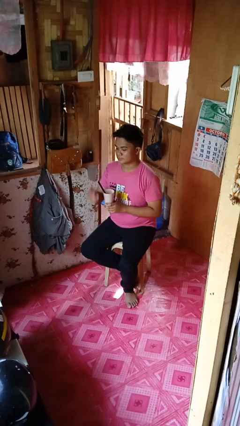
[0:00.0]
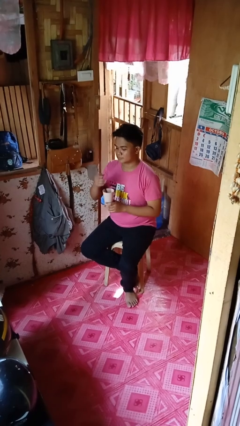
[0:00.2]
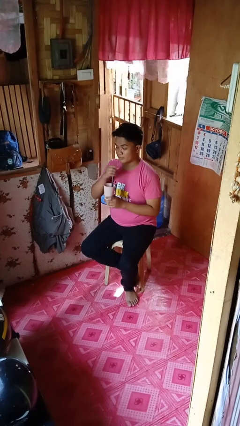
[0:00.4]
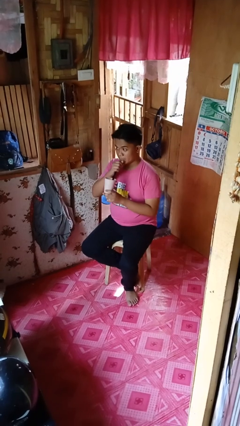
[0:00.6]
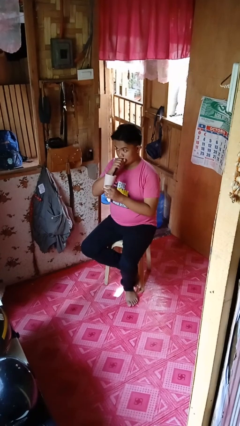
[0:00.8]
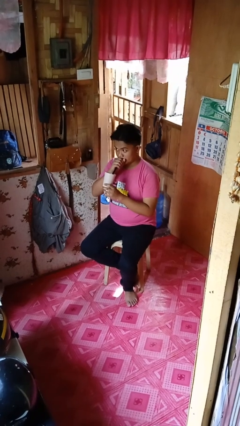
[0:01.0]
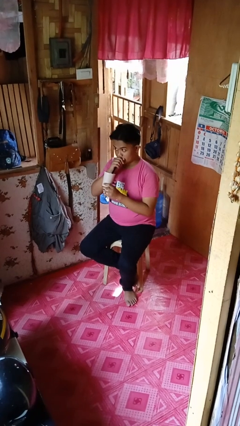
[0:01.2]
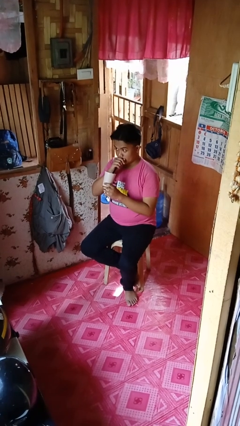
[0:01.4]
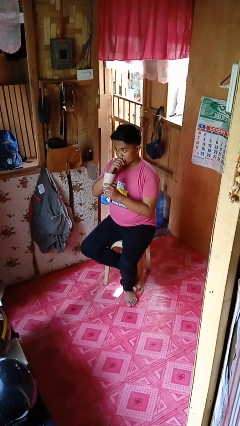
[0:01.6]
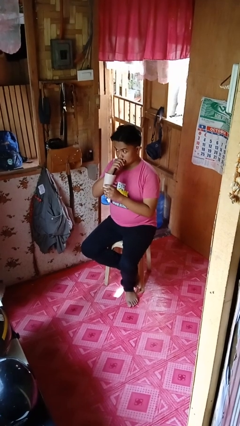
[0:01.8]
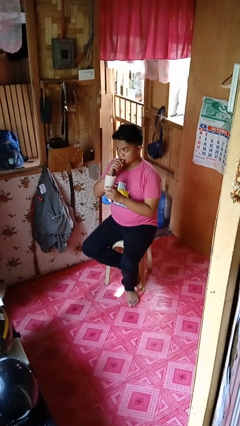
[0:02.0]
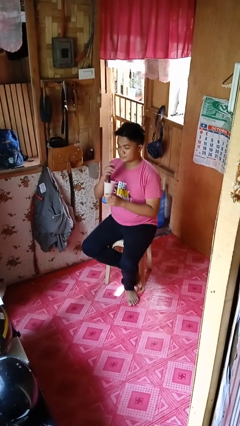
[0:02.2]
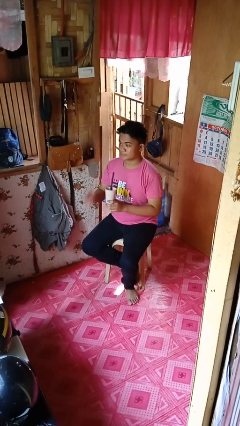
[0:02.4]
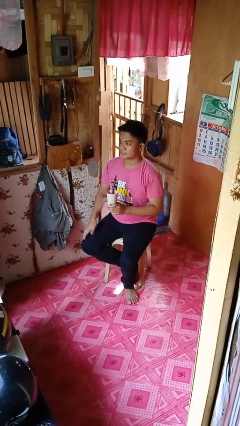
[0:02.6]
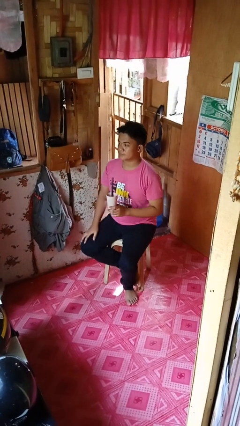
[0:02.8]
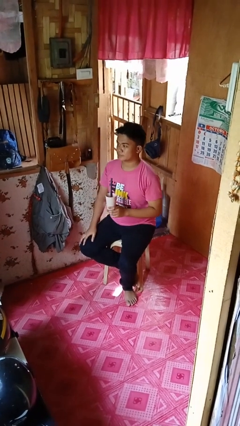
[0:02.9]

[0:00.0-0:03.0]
person drinks from straw

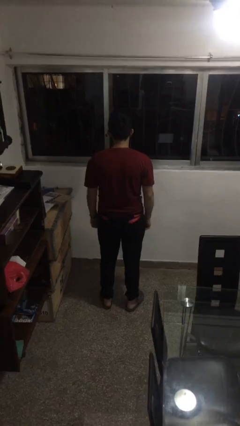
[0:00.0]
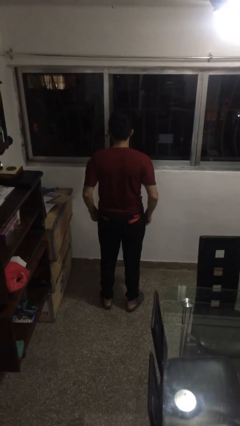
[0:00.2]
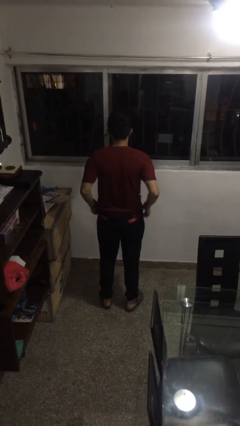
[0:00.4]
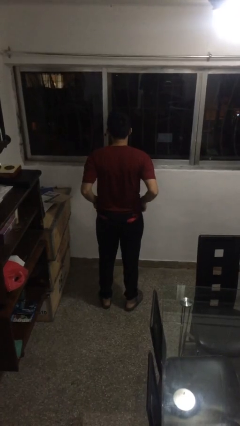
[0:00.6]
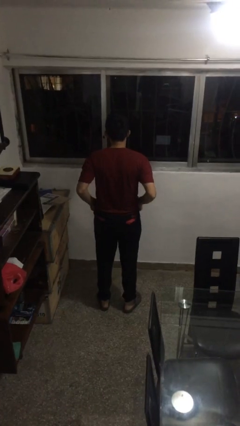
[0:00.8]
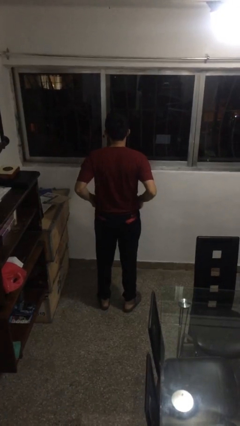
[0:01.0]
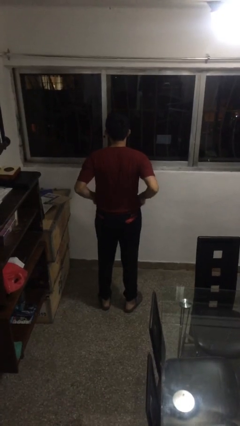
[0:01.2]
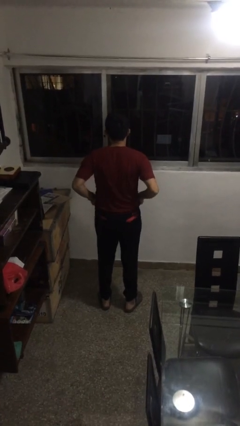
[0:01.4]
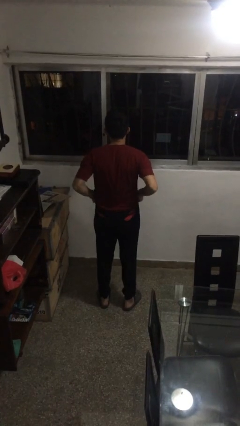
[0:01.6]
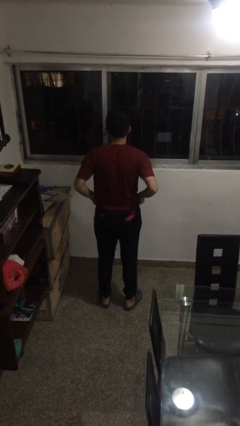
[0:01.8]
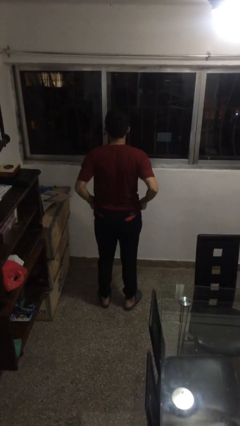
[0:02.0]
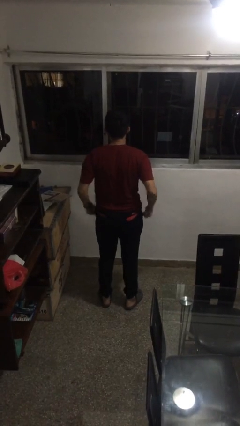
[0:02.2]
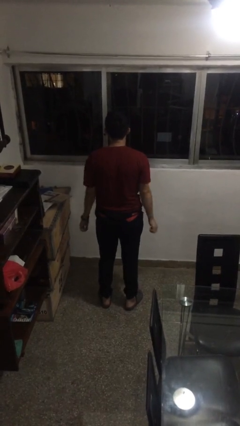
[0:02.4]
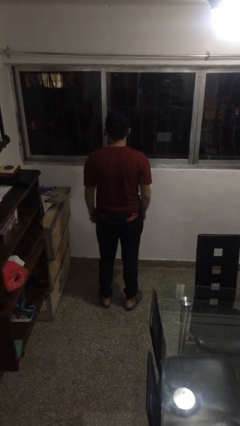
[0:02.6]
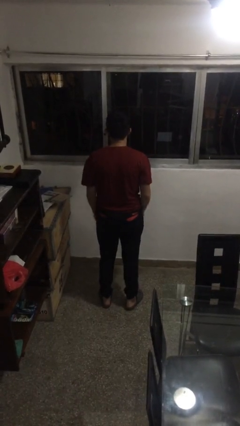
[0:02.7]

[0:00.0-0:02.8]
person hikes up pants

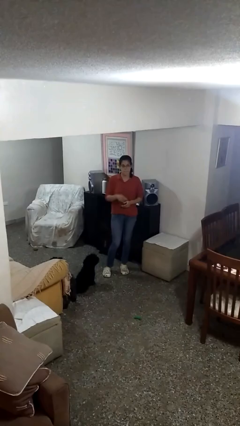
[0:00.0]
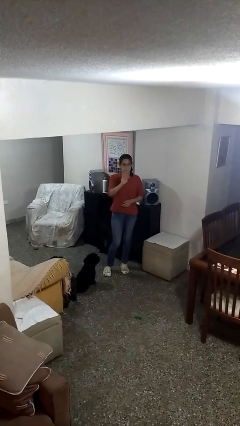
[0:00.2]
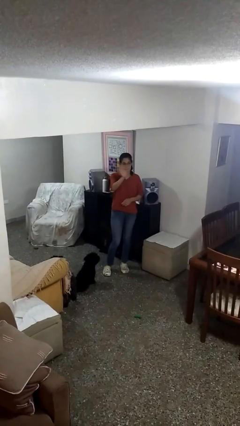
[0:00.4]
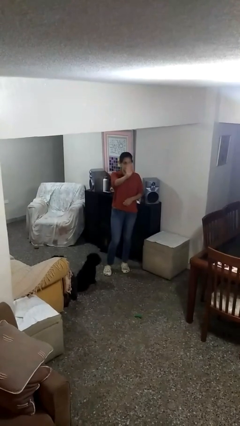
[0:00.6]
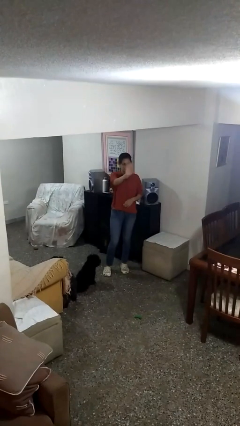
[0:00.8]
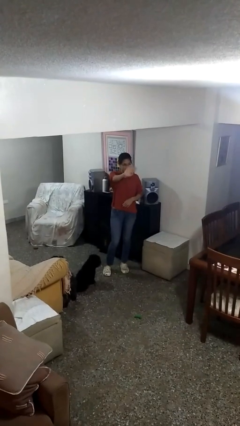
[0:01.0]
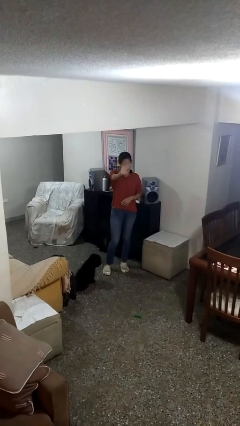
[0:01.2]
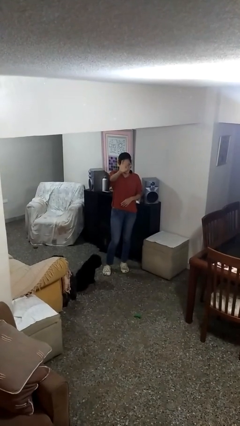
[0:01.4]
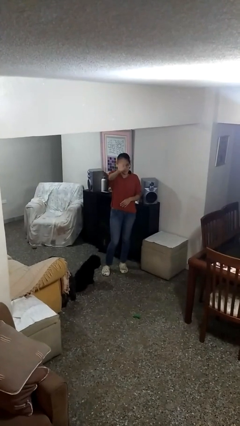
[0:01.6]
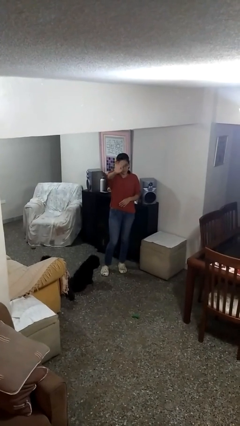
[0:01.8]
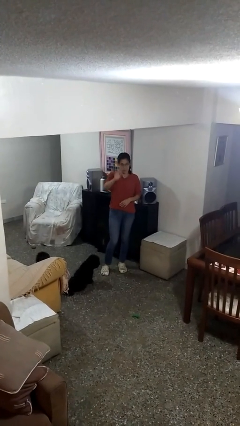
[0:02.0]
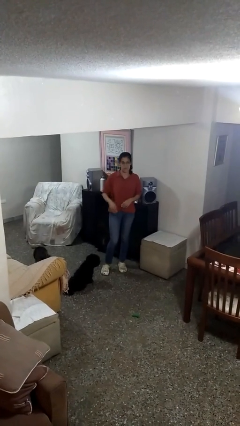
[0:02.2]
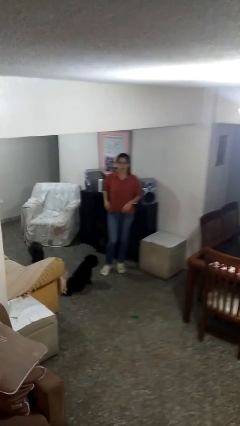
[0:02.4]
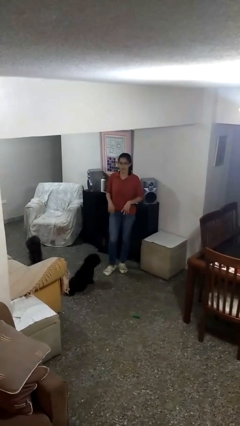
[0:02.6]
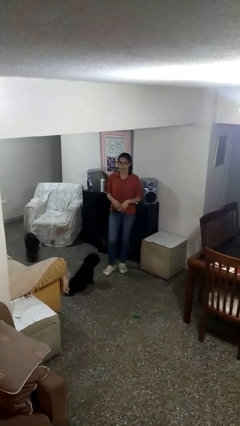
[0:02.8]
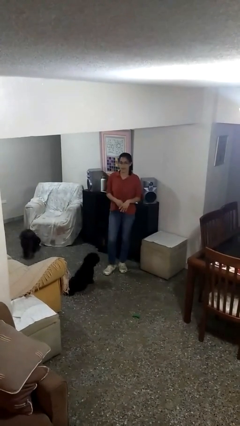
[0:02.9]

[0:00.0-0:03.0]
person waves at person

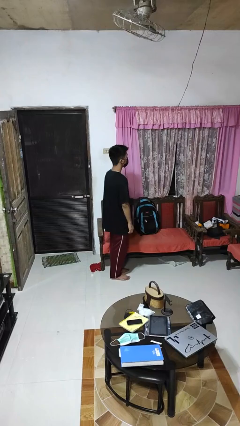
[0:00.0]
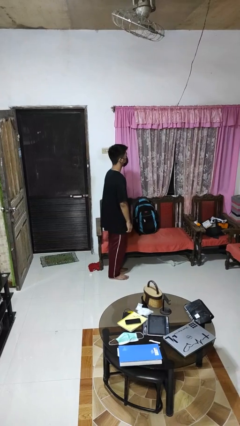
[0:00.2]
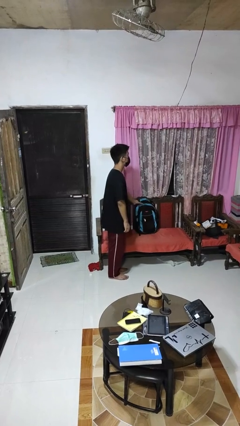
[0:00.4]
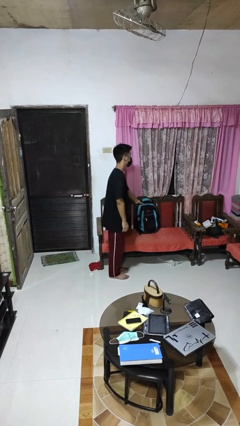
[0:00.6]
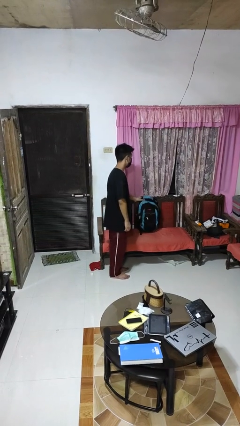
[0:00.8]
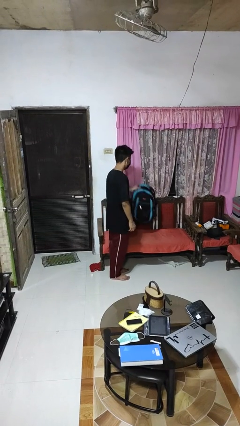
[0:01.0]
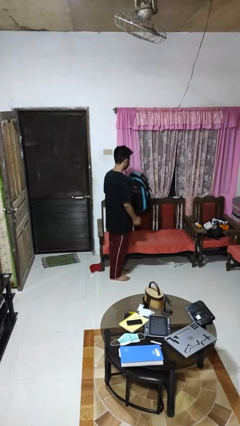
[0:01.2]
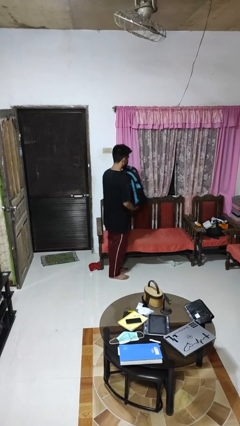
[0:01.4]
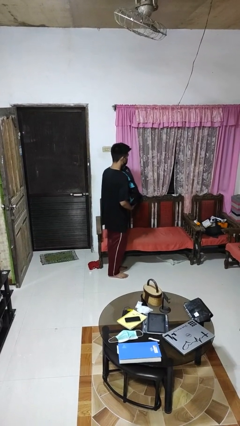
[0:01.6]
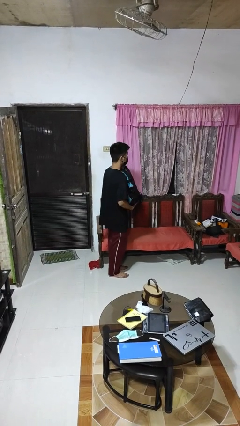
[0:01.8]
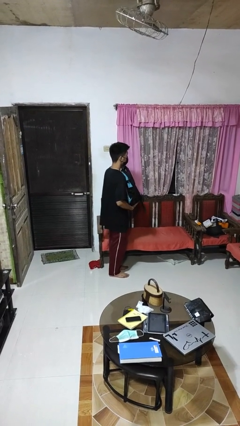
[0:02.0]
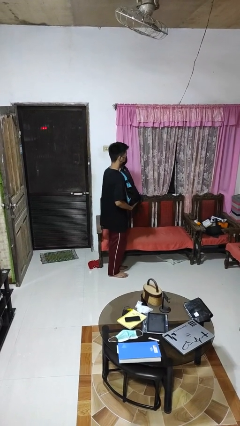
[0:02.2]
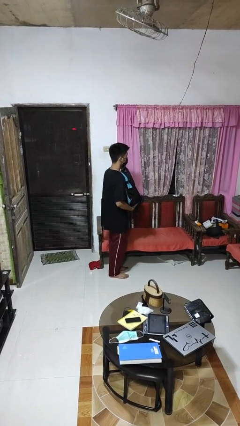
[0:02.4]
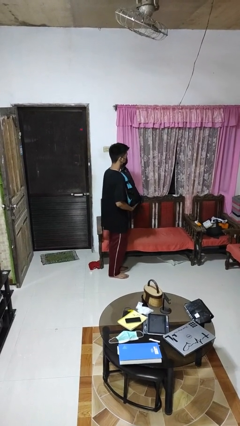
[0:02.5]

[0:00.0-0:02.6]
person picks up object from couch

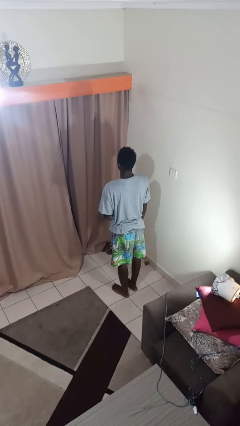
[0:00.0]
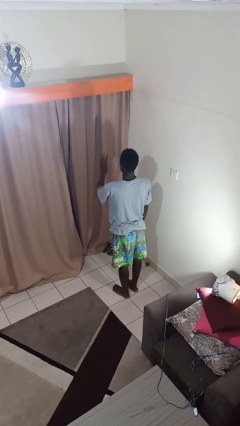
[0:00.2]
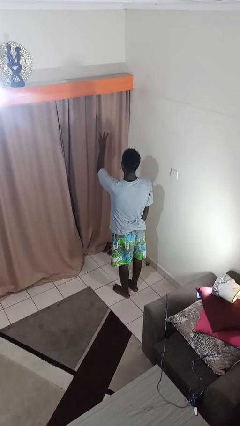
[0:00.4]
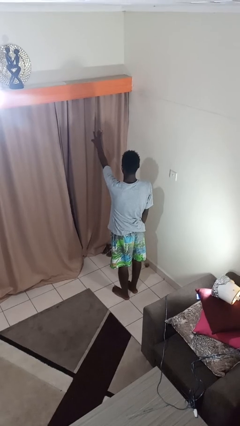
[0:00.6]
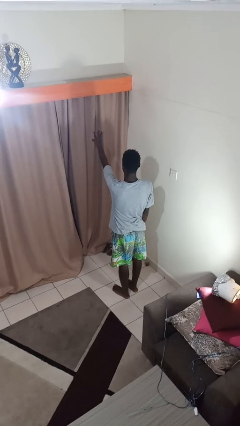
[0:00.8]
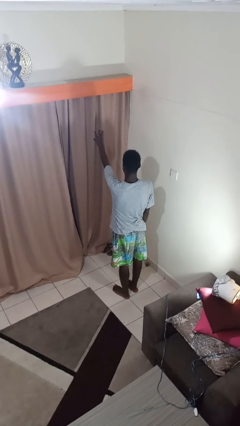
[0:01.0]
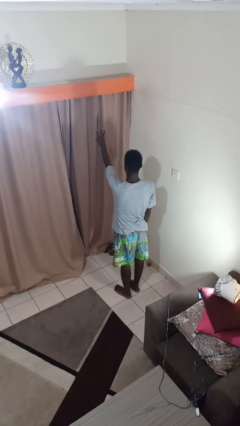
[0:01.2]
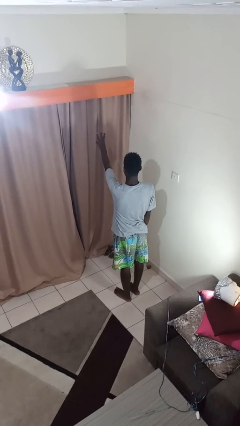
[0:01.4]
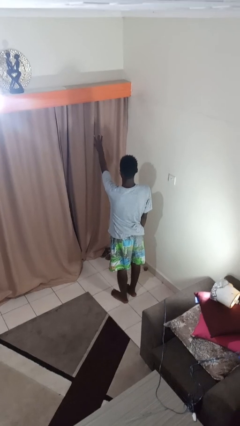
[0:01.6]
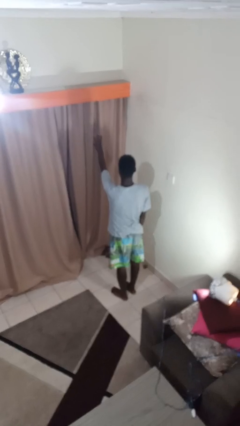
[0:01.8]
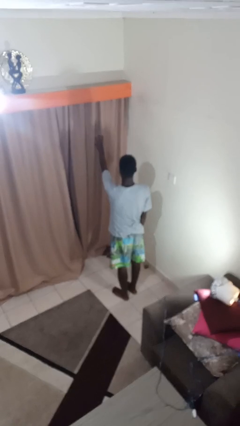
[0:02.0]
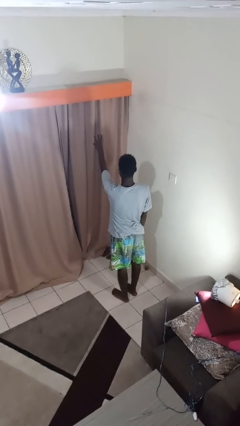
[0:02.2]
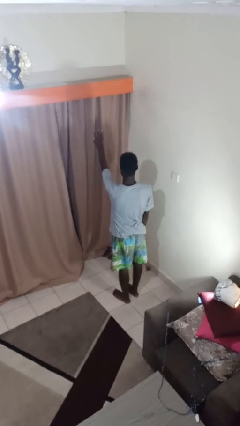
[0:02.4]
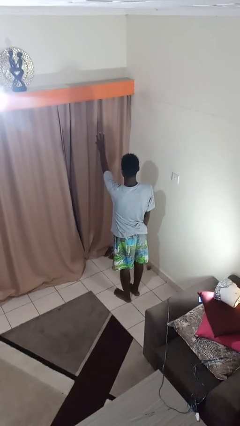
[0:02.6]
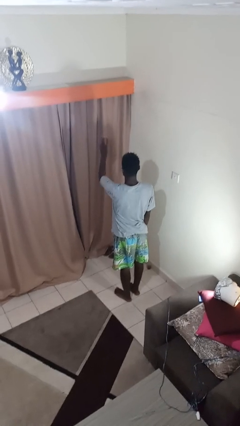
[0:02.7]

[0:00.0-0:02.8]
person gestures number three

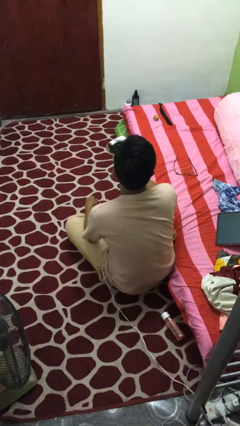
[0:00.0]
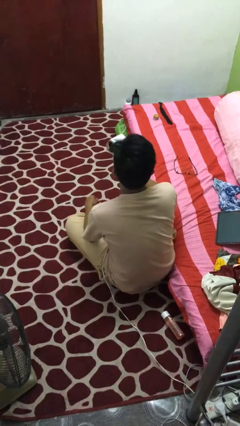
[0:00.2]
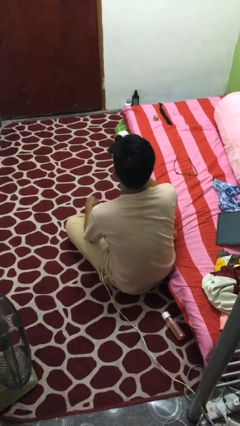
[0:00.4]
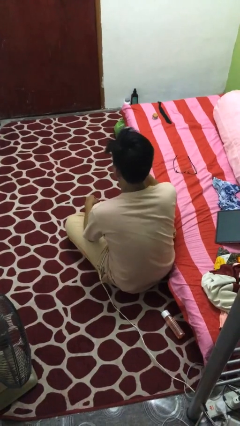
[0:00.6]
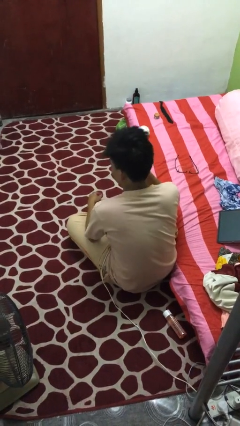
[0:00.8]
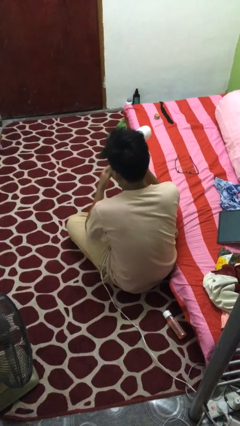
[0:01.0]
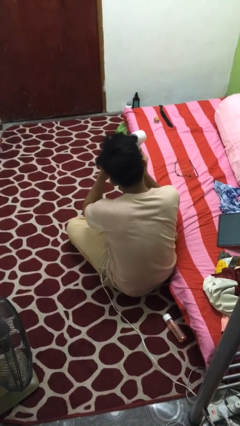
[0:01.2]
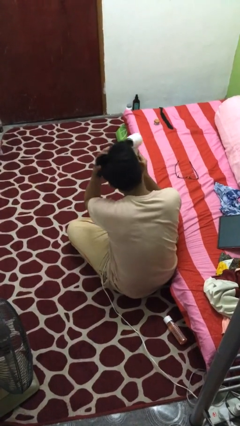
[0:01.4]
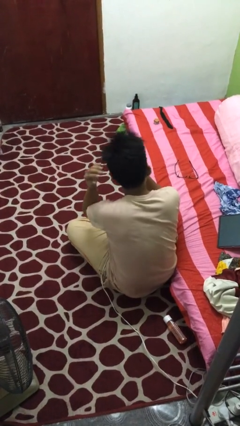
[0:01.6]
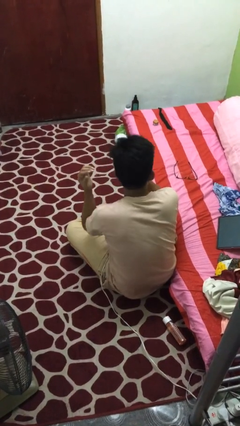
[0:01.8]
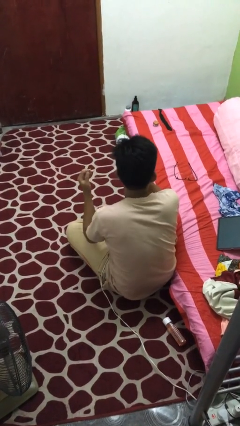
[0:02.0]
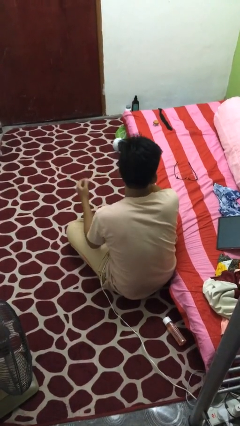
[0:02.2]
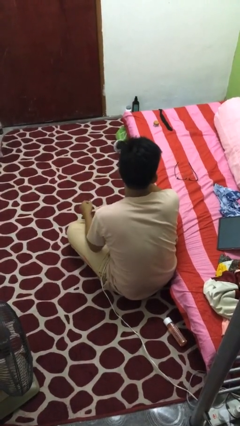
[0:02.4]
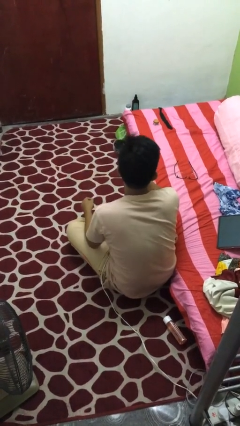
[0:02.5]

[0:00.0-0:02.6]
person dries hair with hairdryer

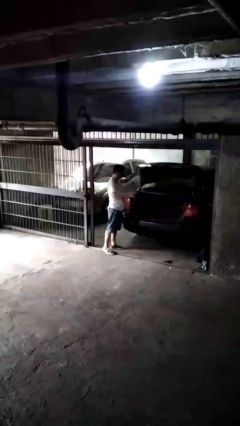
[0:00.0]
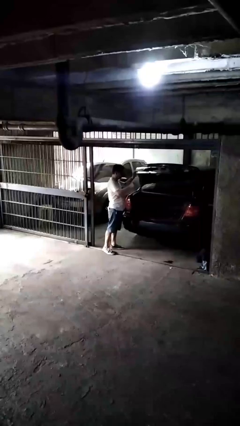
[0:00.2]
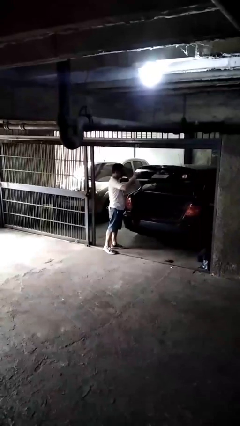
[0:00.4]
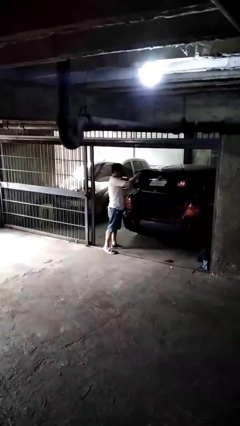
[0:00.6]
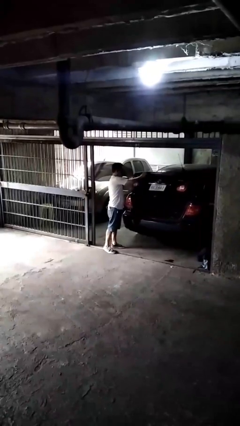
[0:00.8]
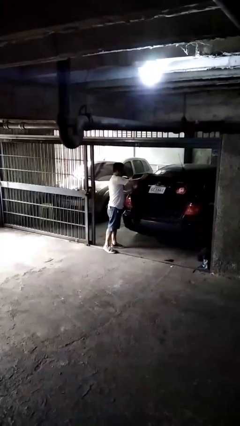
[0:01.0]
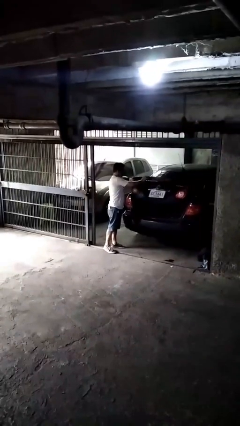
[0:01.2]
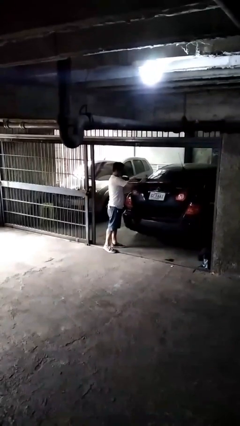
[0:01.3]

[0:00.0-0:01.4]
person closes car trunk
